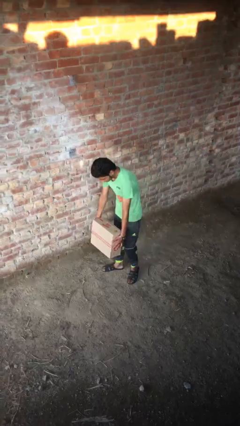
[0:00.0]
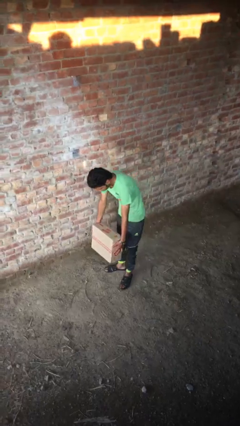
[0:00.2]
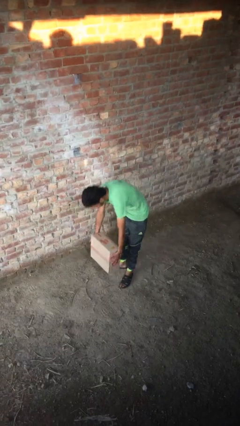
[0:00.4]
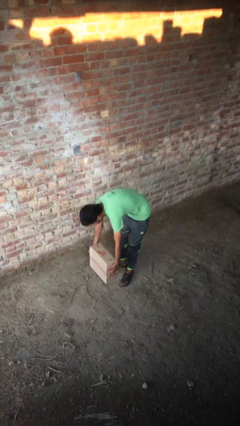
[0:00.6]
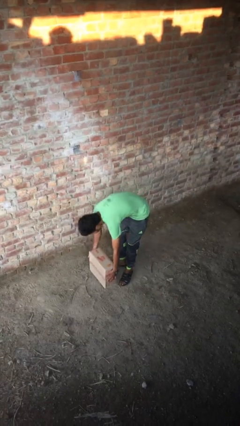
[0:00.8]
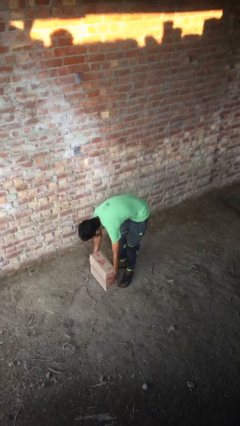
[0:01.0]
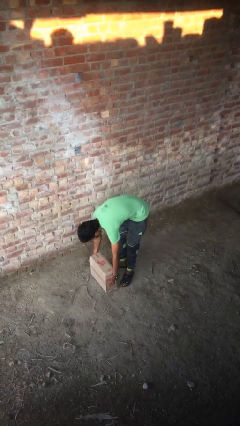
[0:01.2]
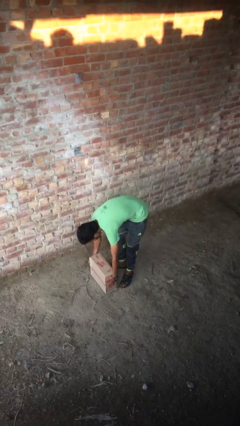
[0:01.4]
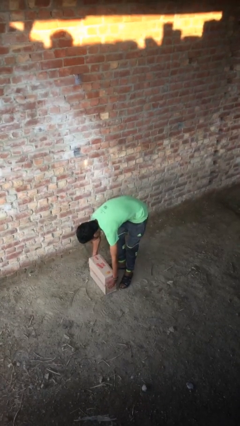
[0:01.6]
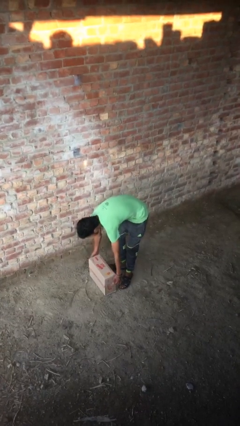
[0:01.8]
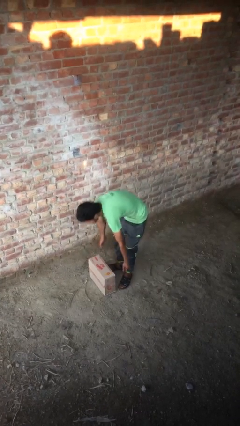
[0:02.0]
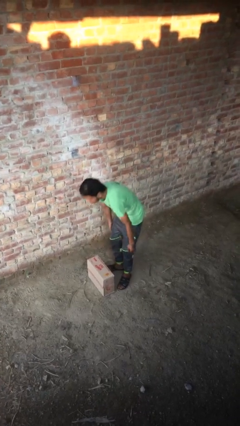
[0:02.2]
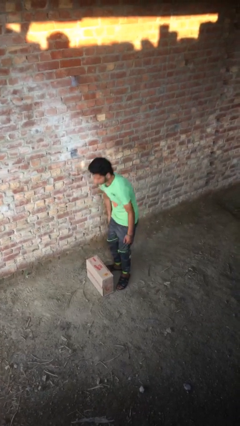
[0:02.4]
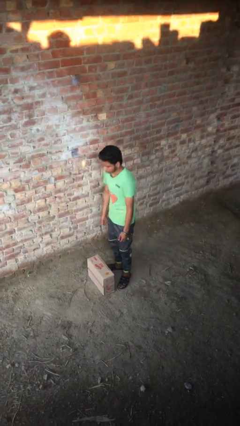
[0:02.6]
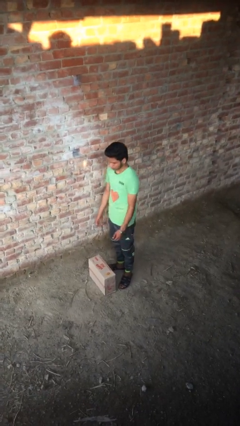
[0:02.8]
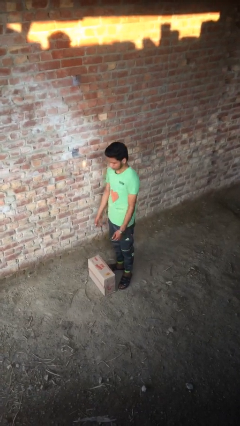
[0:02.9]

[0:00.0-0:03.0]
person puts down object on floor

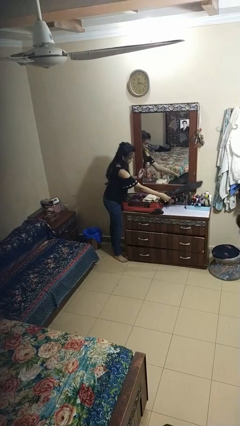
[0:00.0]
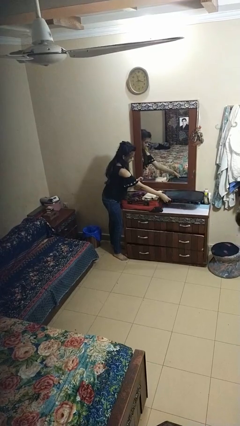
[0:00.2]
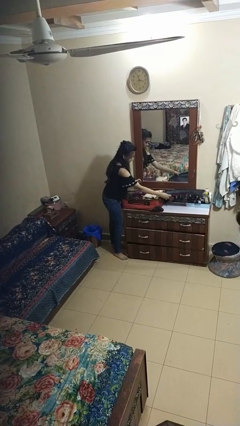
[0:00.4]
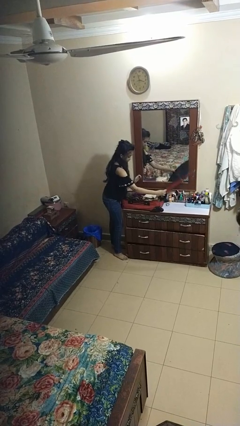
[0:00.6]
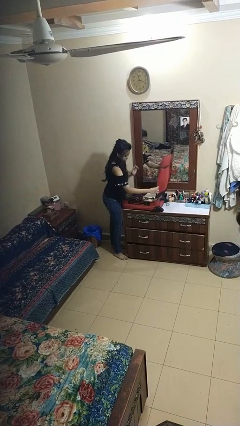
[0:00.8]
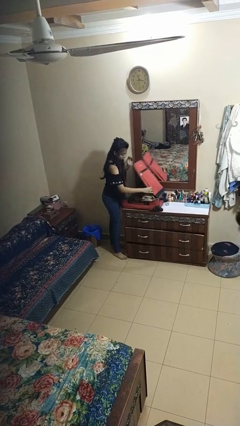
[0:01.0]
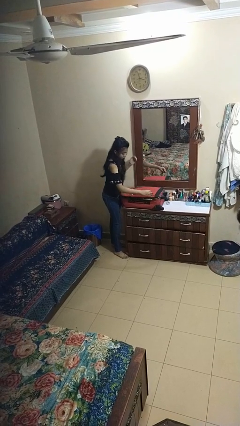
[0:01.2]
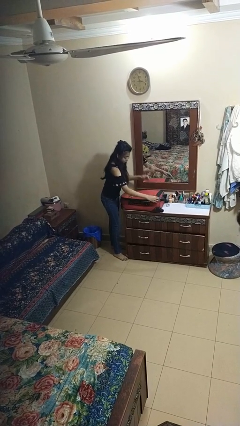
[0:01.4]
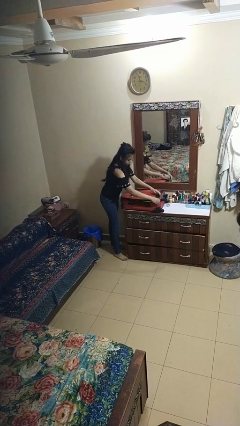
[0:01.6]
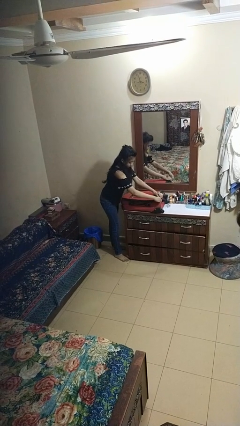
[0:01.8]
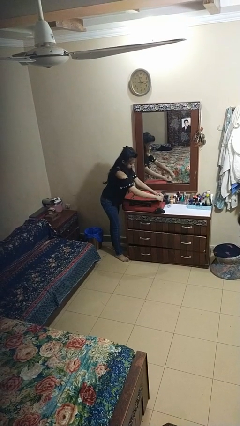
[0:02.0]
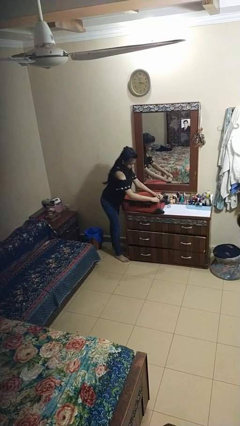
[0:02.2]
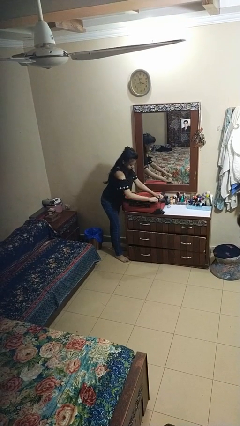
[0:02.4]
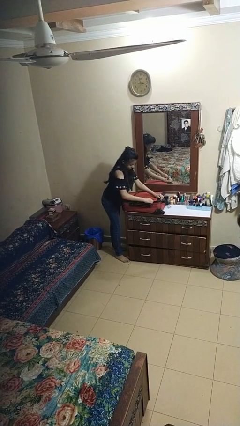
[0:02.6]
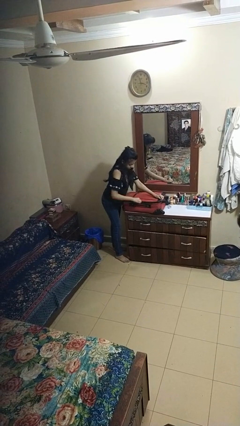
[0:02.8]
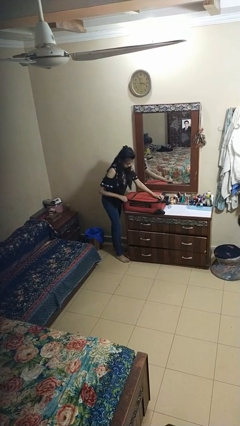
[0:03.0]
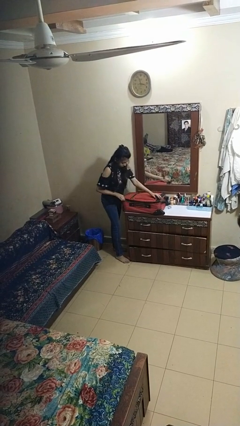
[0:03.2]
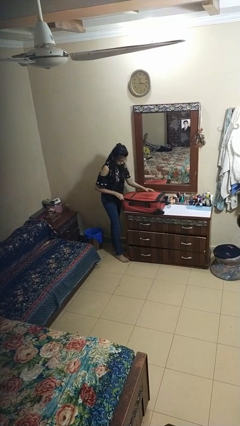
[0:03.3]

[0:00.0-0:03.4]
person closes suitcase

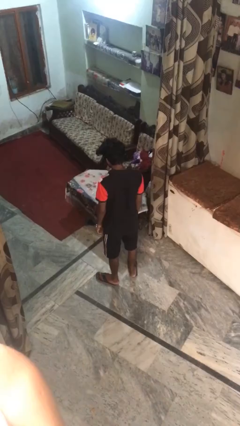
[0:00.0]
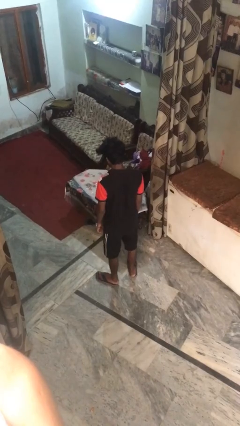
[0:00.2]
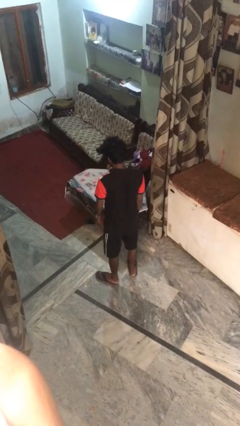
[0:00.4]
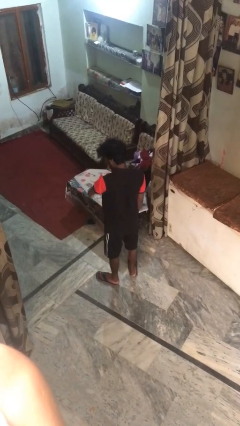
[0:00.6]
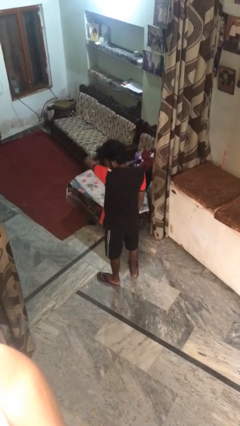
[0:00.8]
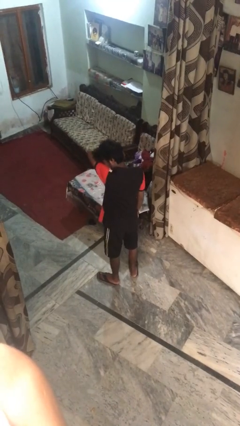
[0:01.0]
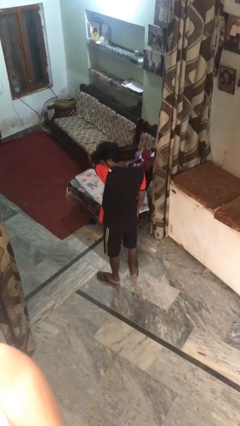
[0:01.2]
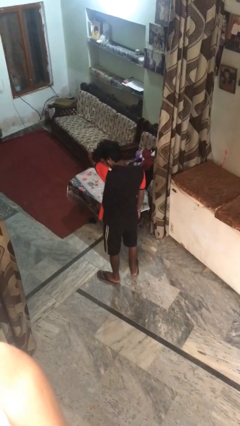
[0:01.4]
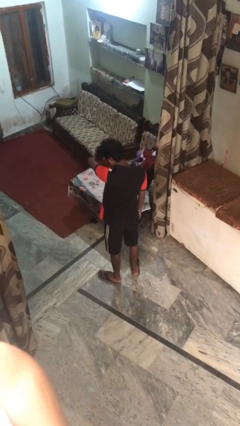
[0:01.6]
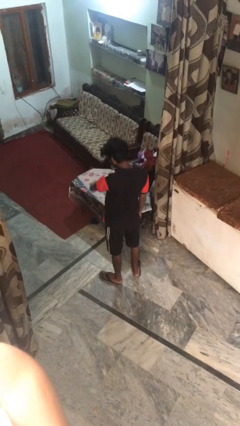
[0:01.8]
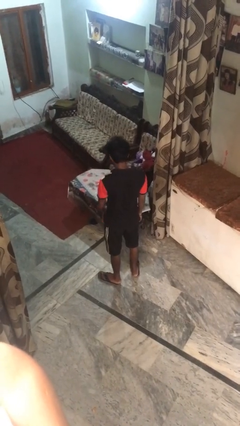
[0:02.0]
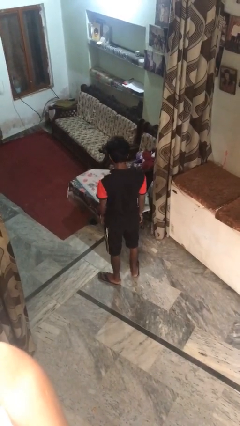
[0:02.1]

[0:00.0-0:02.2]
person sneezes into arm

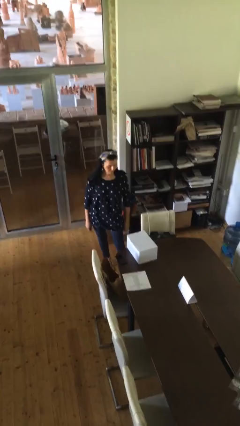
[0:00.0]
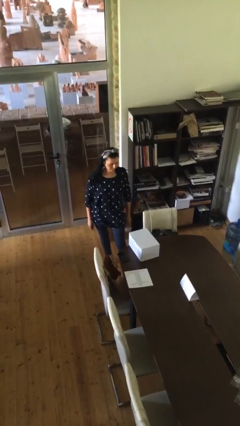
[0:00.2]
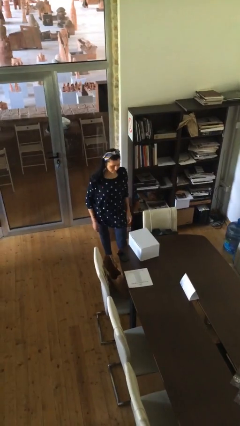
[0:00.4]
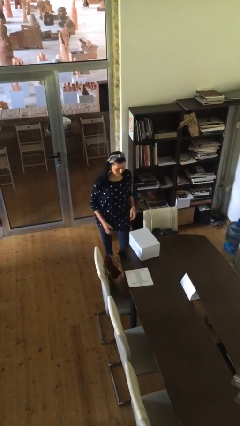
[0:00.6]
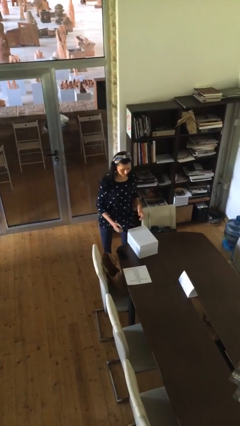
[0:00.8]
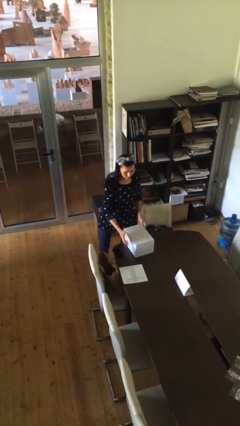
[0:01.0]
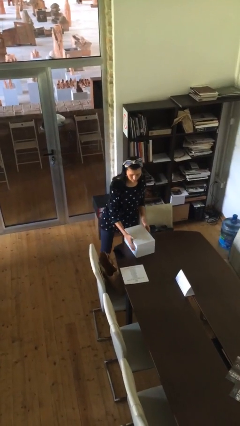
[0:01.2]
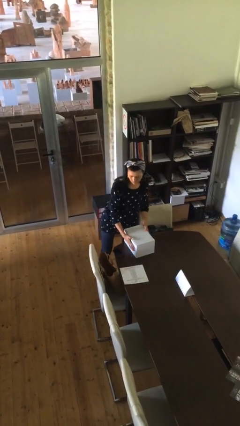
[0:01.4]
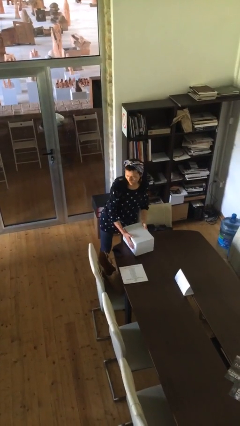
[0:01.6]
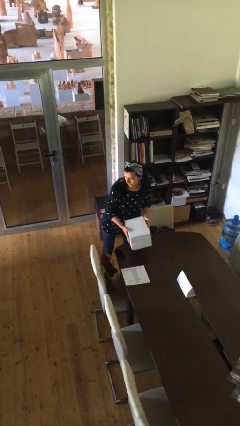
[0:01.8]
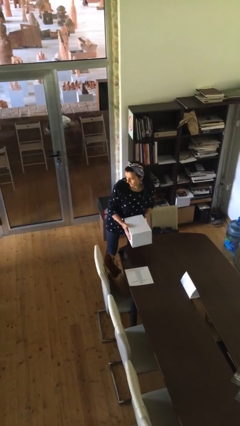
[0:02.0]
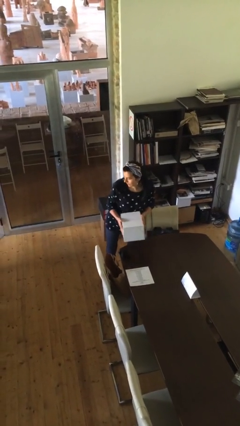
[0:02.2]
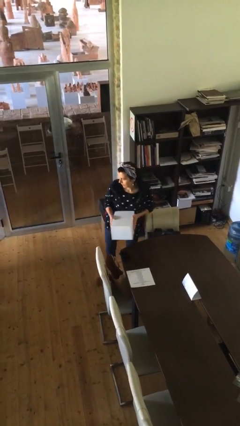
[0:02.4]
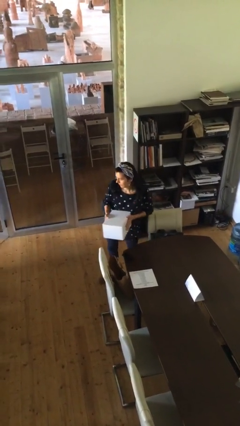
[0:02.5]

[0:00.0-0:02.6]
person picks up object from table

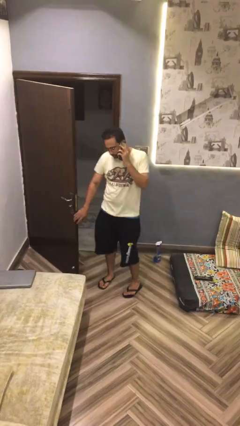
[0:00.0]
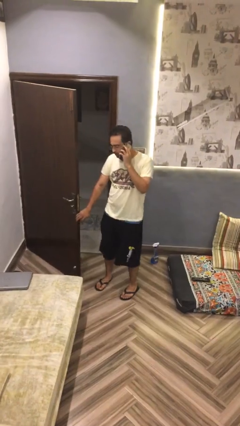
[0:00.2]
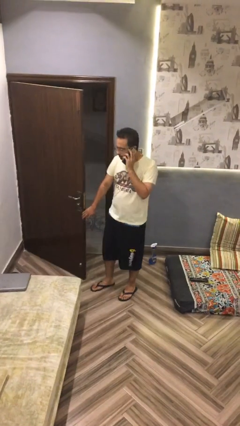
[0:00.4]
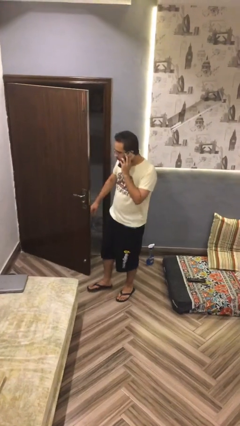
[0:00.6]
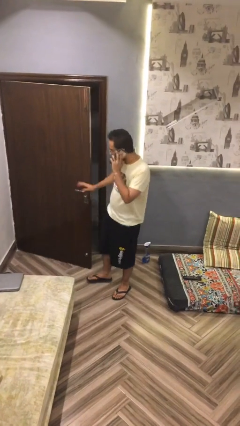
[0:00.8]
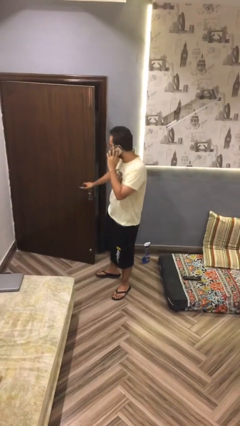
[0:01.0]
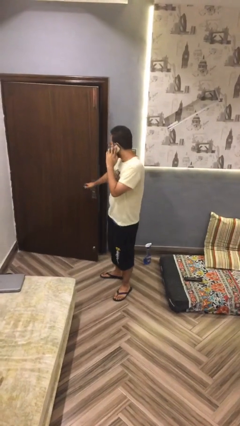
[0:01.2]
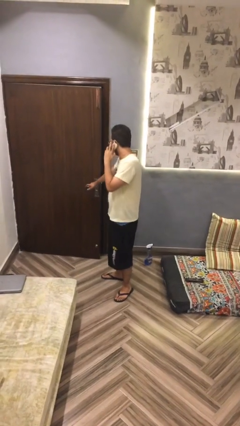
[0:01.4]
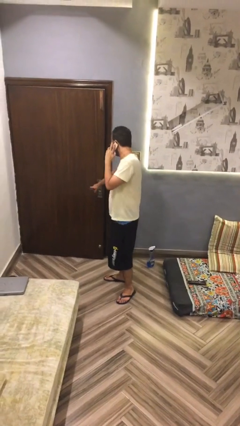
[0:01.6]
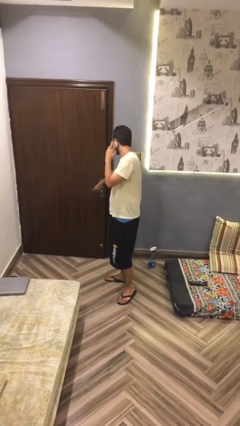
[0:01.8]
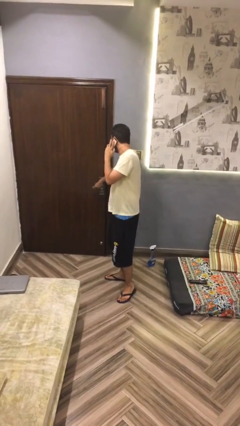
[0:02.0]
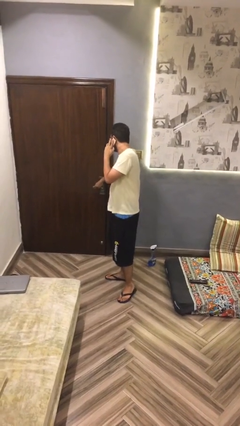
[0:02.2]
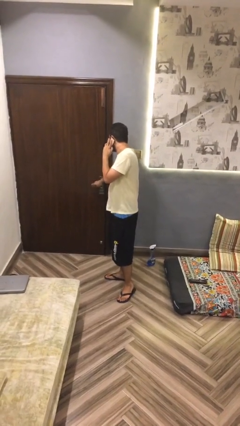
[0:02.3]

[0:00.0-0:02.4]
person closes facility door

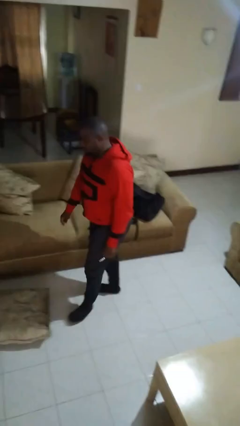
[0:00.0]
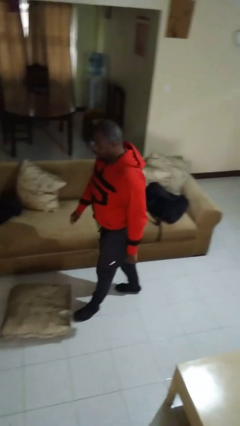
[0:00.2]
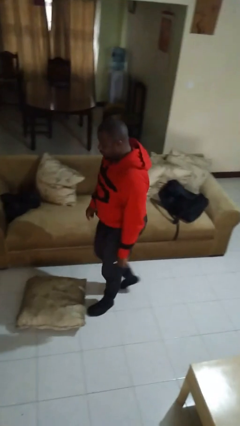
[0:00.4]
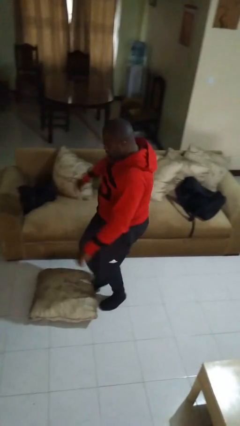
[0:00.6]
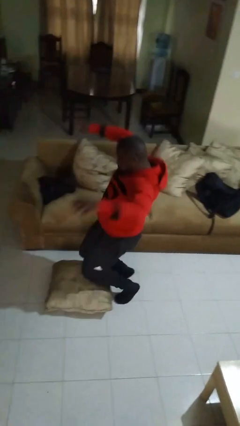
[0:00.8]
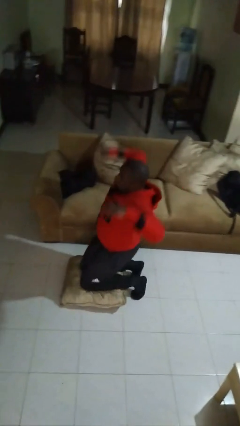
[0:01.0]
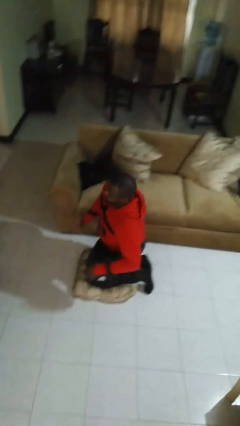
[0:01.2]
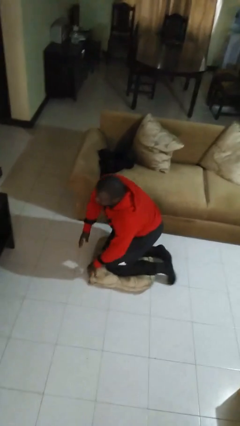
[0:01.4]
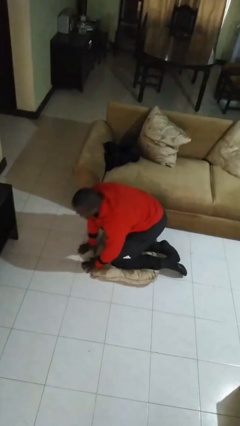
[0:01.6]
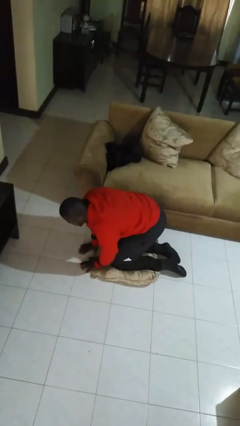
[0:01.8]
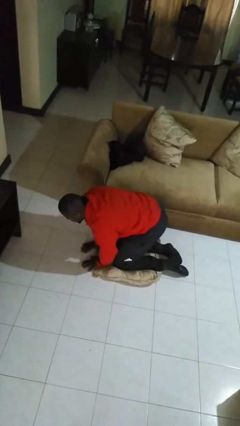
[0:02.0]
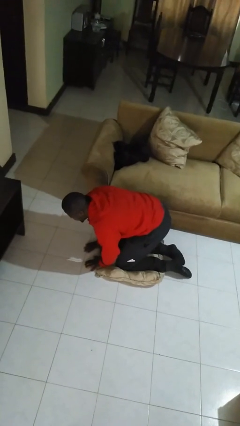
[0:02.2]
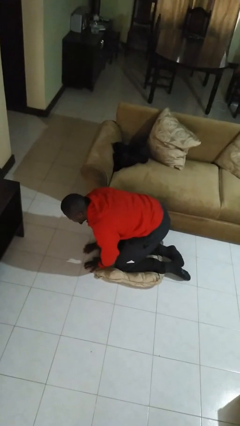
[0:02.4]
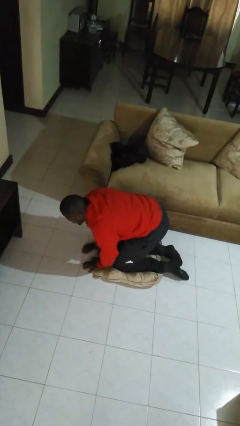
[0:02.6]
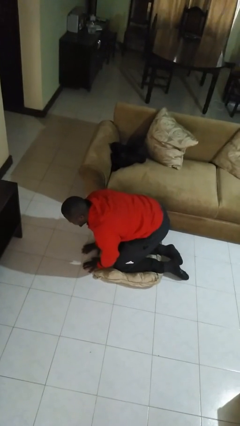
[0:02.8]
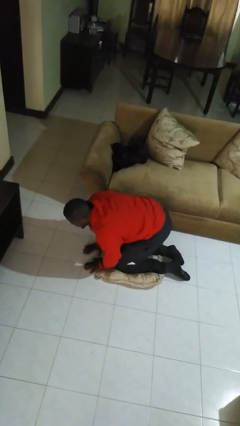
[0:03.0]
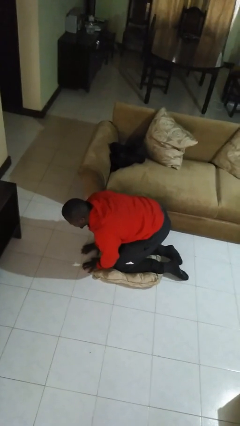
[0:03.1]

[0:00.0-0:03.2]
person trips on object on floor

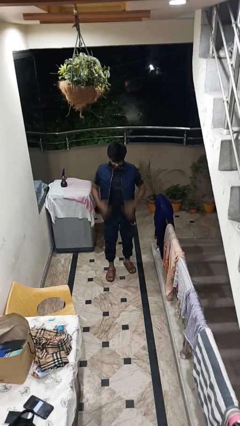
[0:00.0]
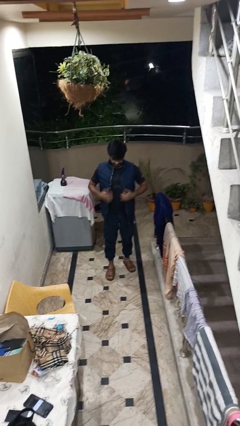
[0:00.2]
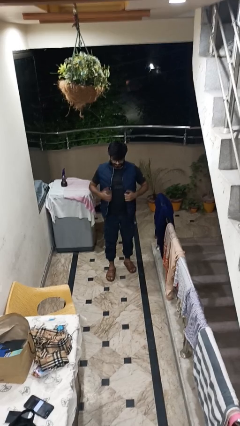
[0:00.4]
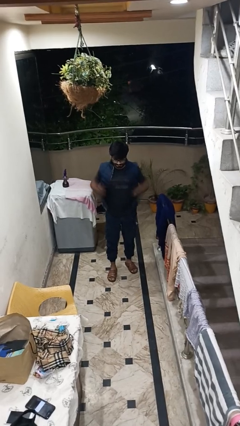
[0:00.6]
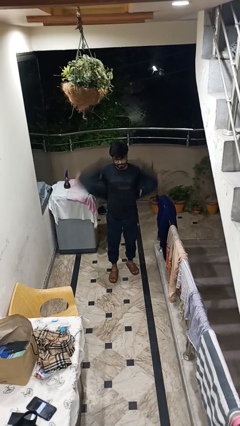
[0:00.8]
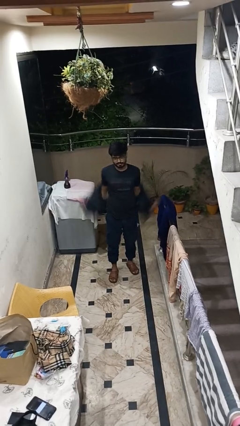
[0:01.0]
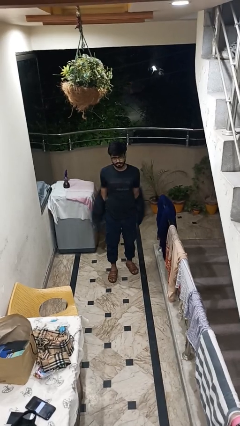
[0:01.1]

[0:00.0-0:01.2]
person takes off jacket
